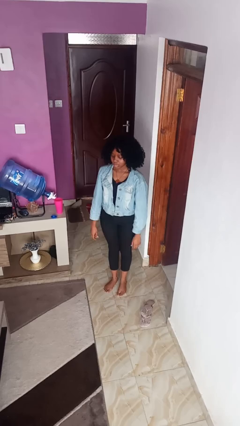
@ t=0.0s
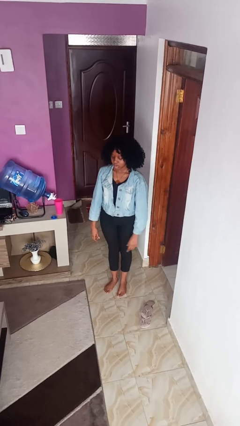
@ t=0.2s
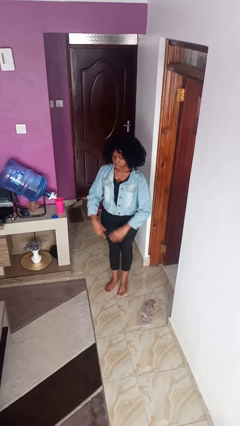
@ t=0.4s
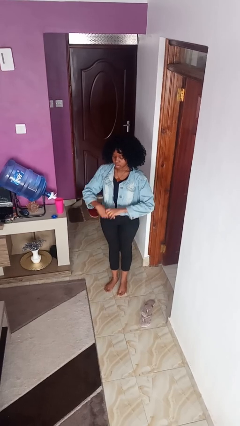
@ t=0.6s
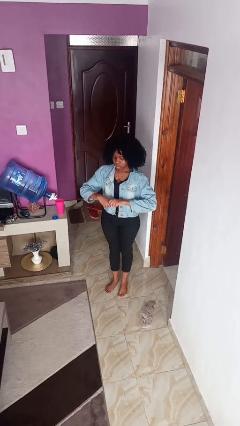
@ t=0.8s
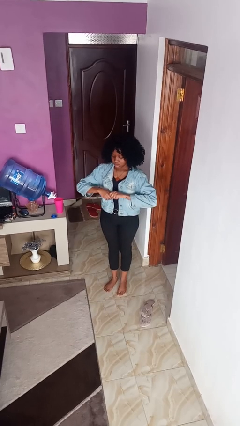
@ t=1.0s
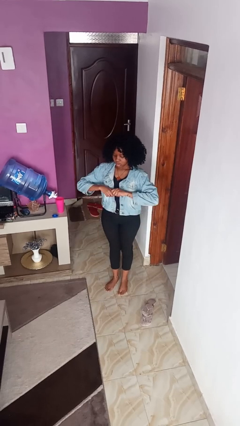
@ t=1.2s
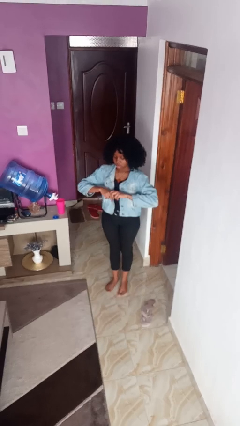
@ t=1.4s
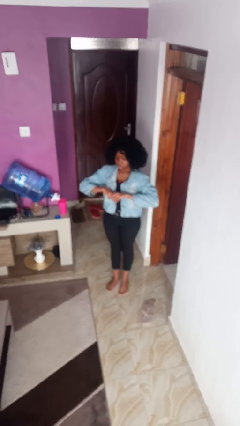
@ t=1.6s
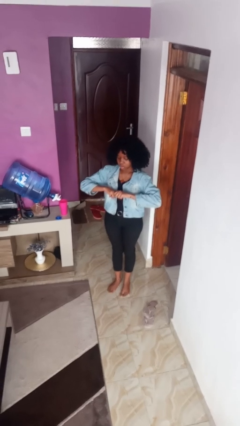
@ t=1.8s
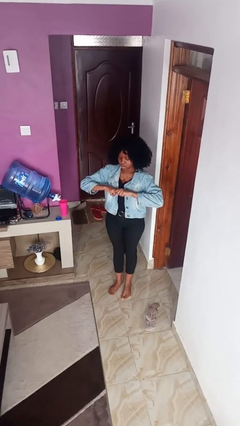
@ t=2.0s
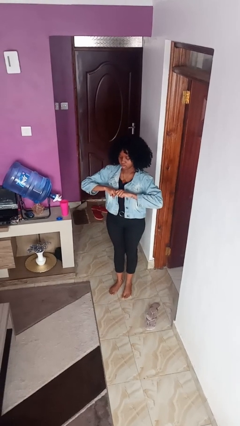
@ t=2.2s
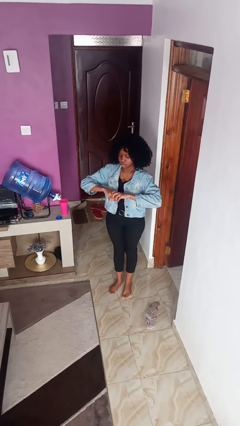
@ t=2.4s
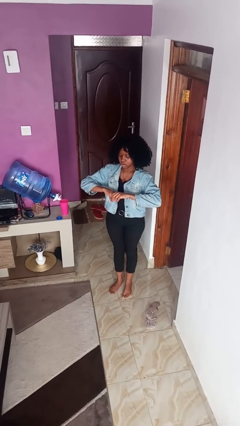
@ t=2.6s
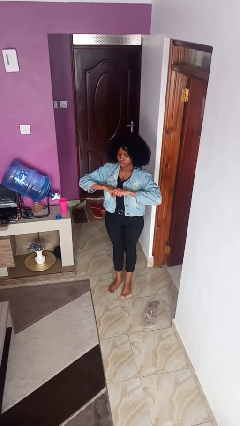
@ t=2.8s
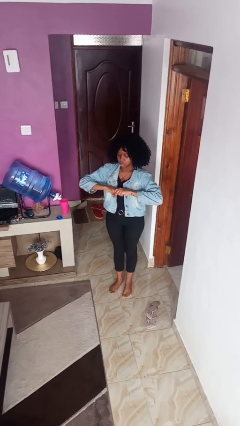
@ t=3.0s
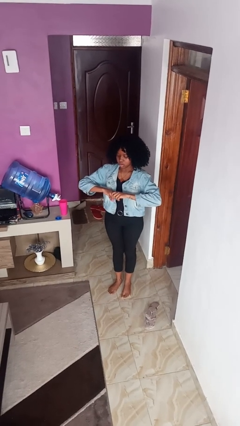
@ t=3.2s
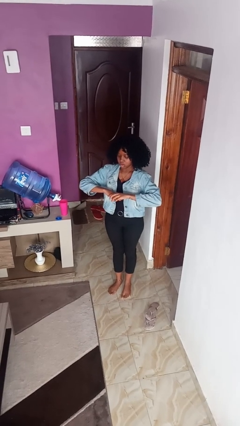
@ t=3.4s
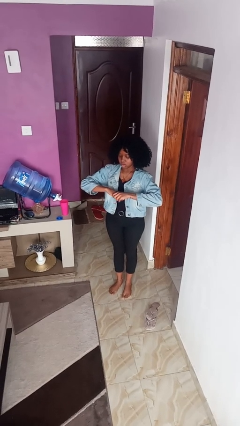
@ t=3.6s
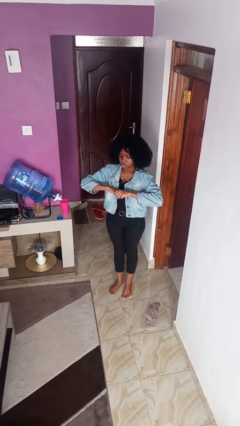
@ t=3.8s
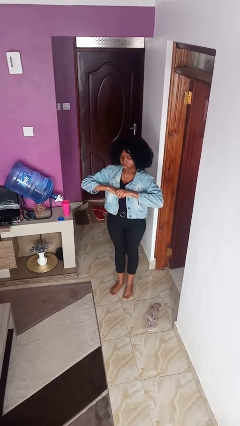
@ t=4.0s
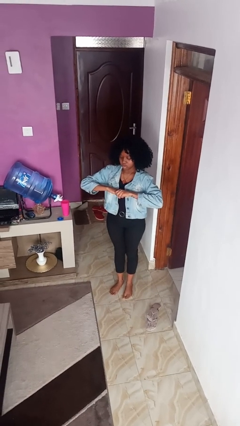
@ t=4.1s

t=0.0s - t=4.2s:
person cracks knuckles

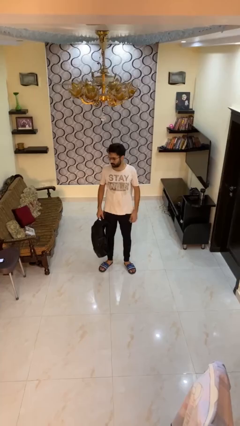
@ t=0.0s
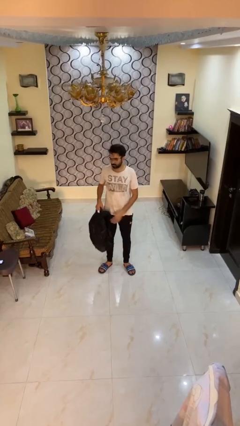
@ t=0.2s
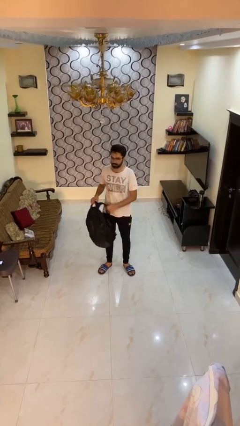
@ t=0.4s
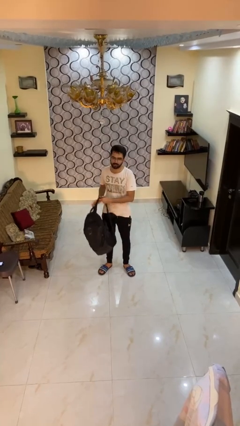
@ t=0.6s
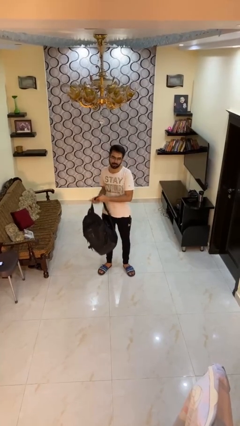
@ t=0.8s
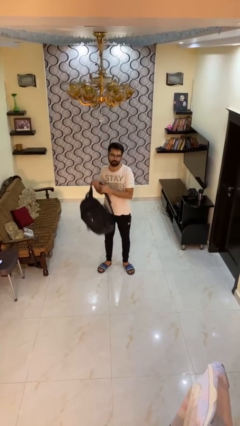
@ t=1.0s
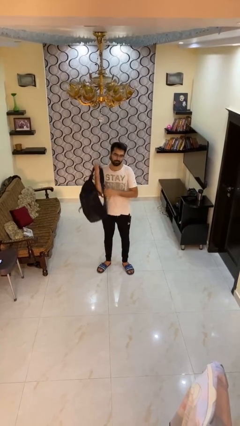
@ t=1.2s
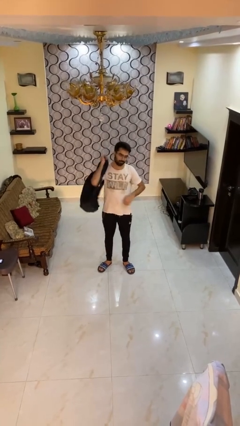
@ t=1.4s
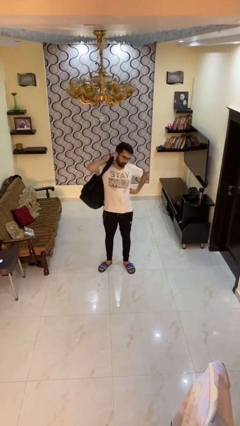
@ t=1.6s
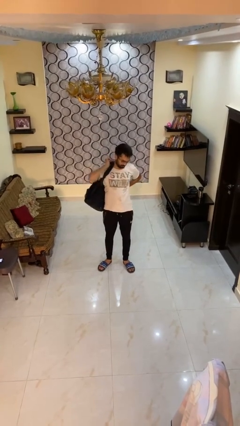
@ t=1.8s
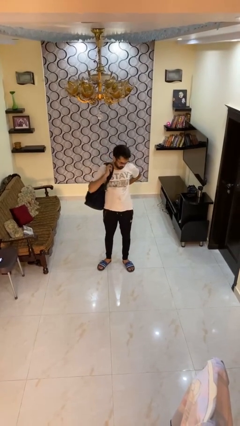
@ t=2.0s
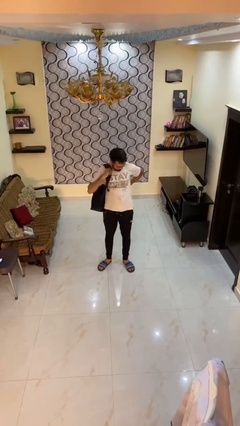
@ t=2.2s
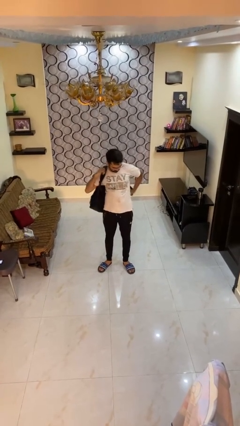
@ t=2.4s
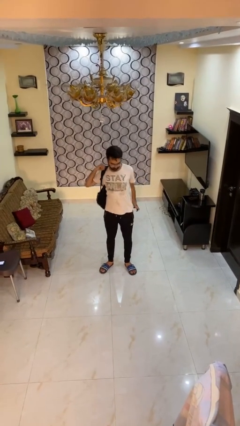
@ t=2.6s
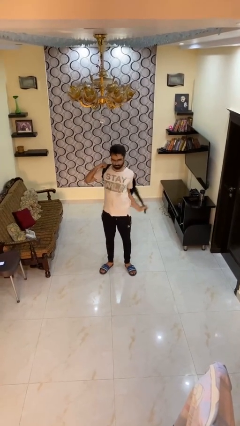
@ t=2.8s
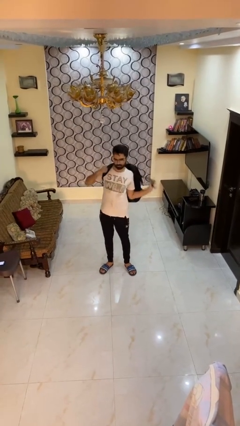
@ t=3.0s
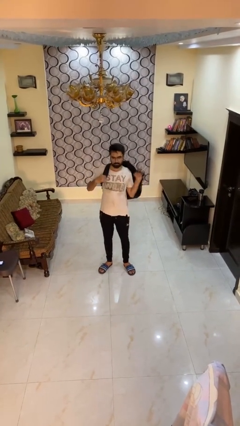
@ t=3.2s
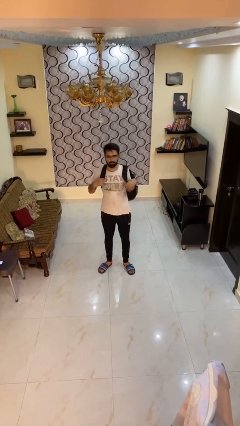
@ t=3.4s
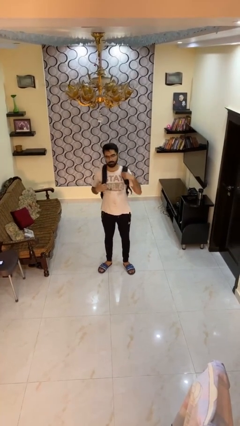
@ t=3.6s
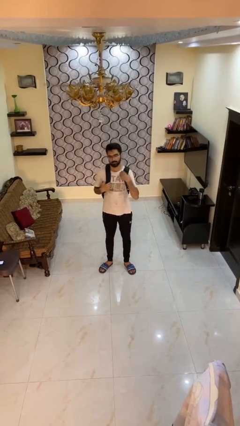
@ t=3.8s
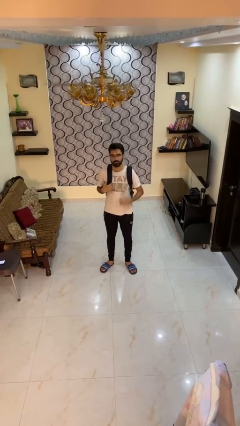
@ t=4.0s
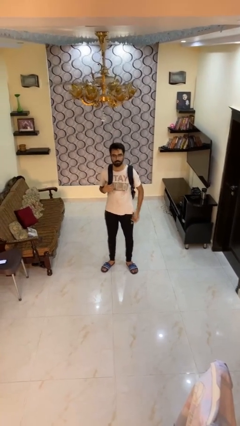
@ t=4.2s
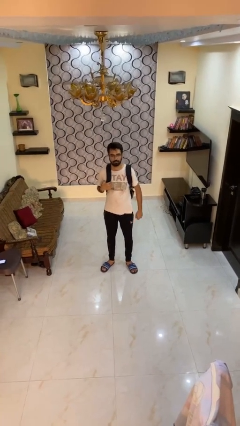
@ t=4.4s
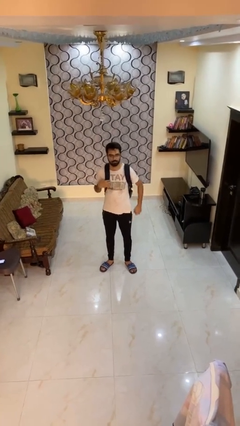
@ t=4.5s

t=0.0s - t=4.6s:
person puts on backpack

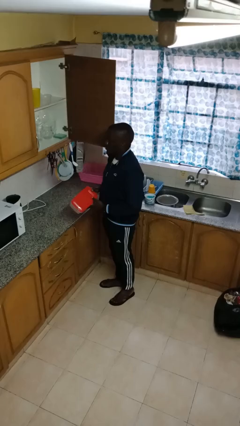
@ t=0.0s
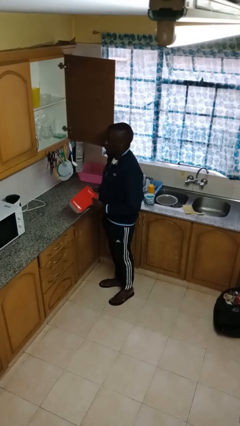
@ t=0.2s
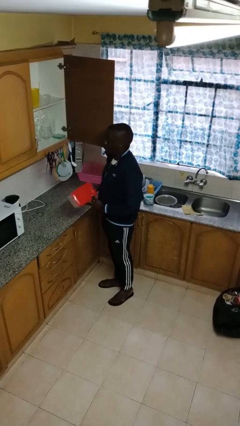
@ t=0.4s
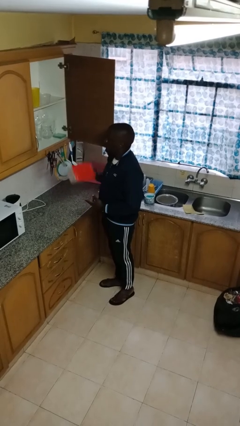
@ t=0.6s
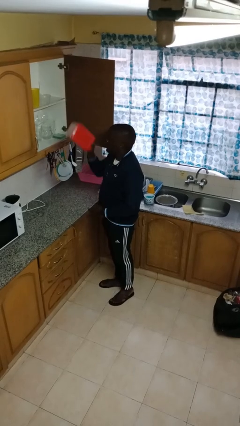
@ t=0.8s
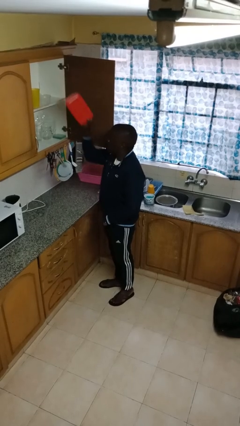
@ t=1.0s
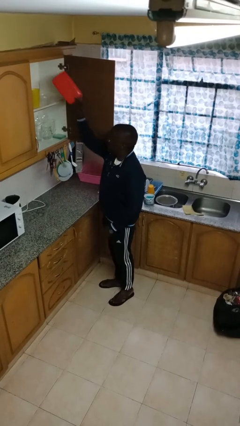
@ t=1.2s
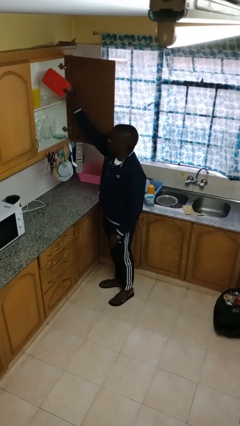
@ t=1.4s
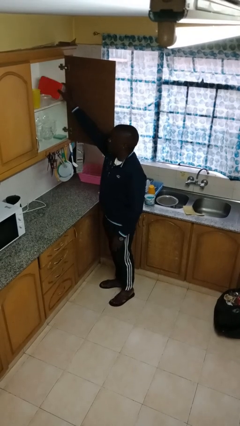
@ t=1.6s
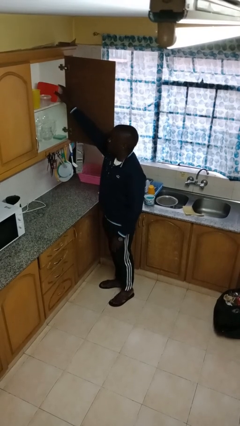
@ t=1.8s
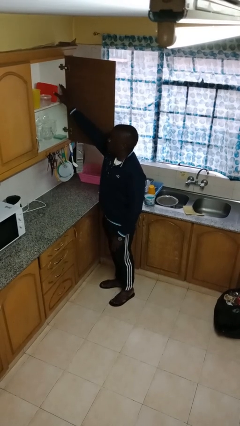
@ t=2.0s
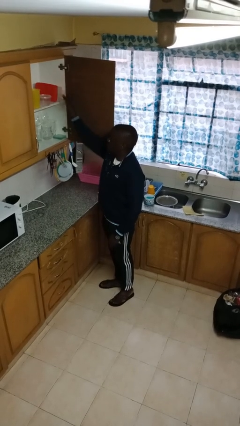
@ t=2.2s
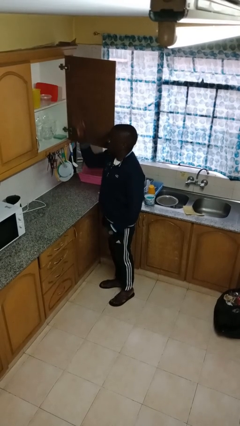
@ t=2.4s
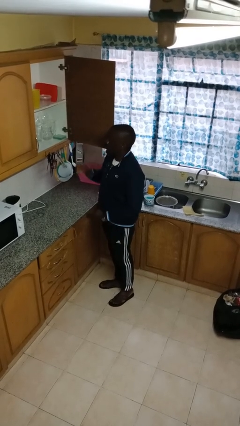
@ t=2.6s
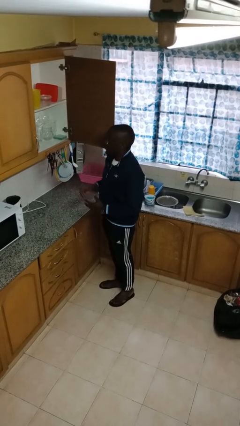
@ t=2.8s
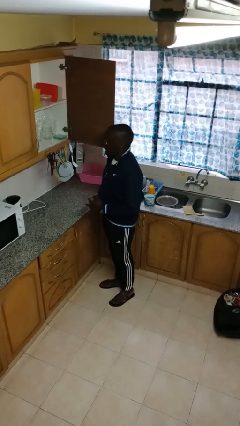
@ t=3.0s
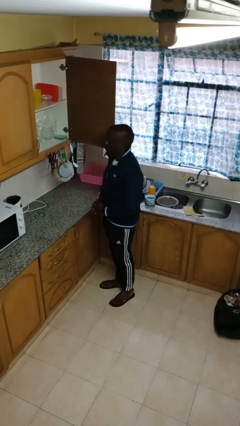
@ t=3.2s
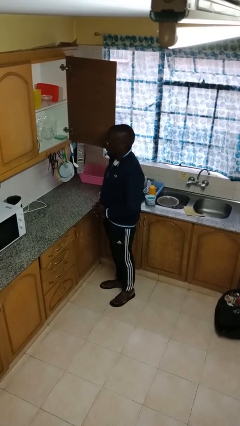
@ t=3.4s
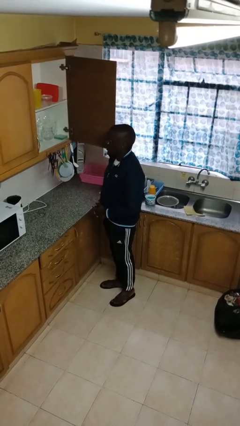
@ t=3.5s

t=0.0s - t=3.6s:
person puts down object on shelf

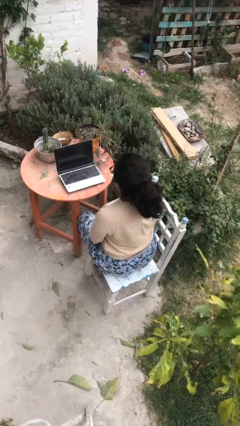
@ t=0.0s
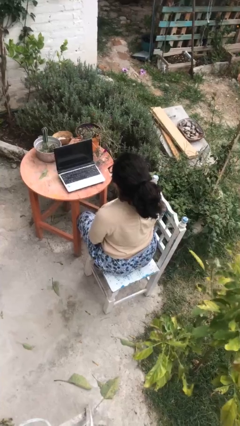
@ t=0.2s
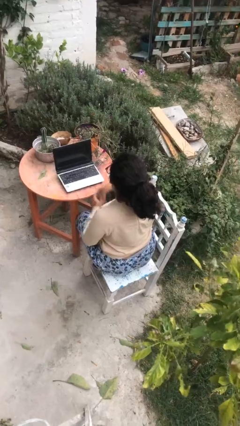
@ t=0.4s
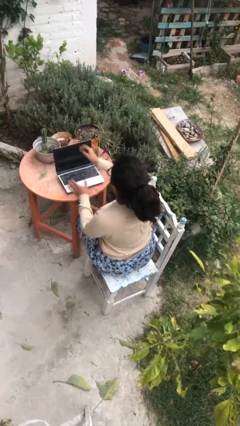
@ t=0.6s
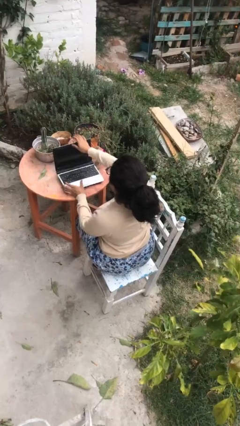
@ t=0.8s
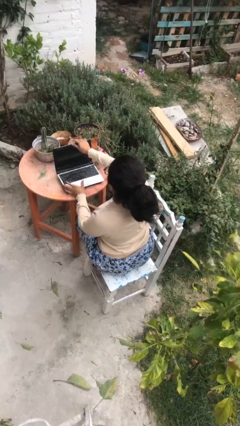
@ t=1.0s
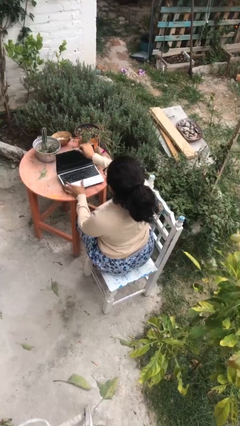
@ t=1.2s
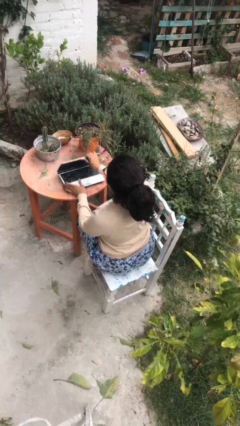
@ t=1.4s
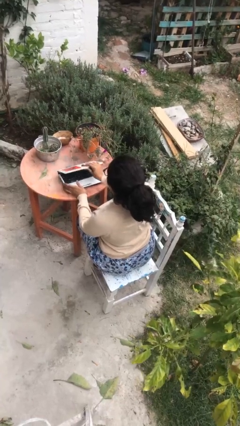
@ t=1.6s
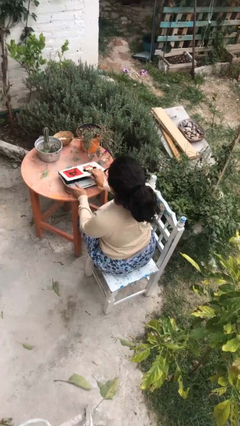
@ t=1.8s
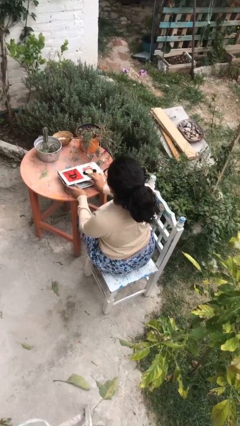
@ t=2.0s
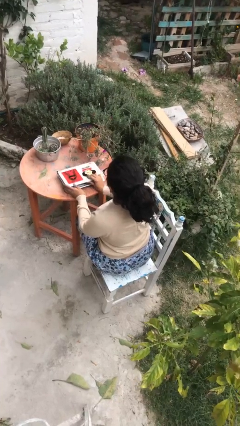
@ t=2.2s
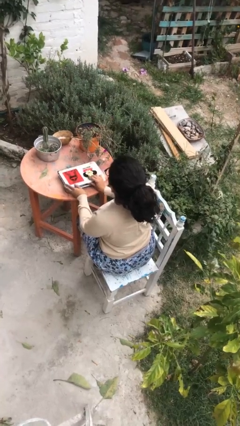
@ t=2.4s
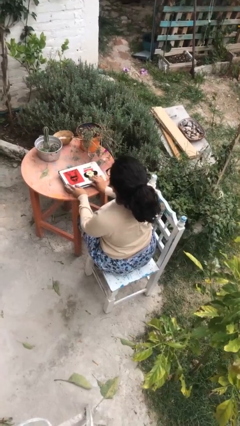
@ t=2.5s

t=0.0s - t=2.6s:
person closes laptop

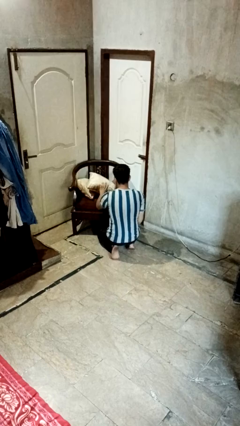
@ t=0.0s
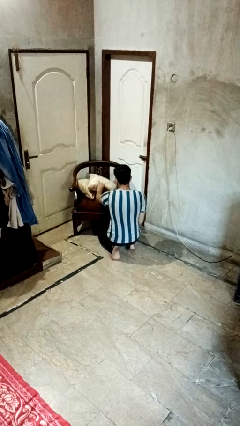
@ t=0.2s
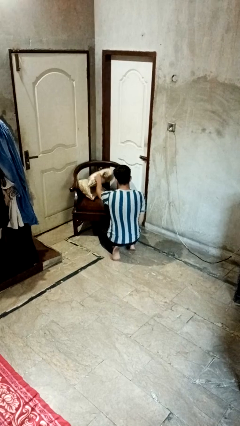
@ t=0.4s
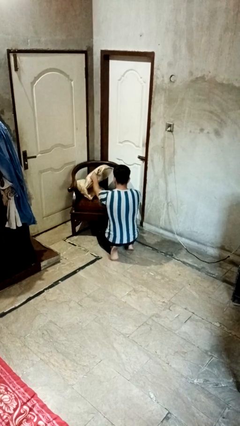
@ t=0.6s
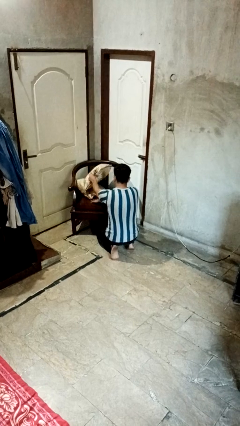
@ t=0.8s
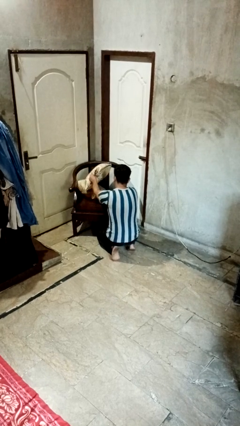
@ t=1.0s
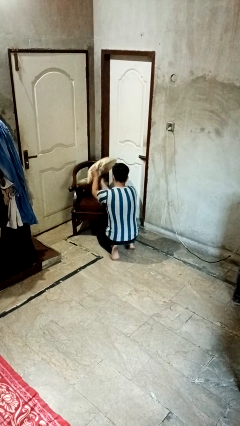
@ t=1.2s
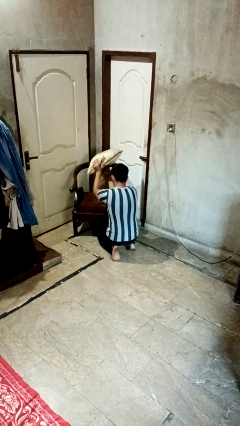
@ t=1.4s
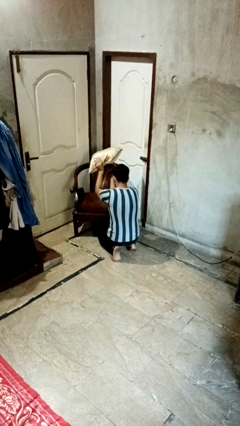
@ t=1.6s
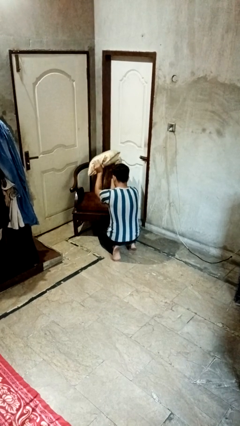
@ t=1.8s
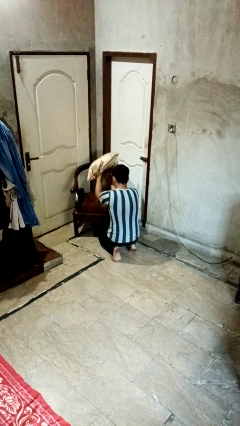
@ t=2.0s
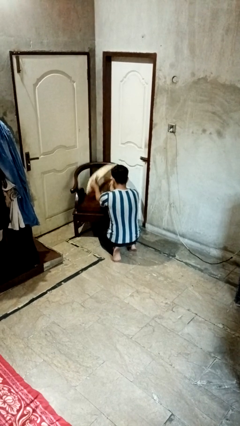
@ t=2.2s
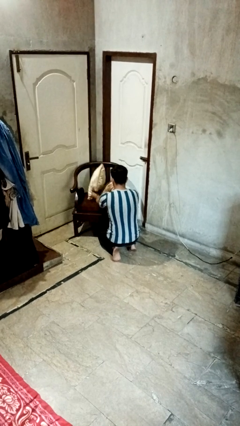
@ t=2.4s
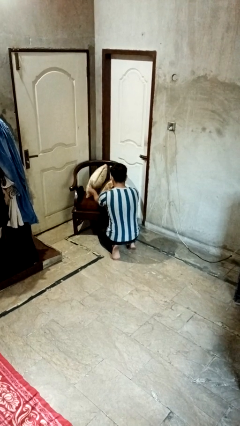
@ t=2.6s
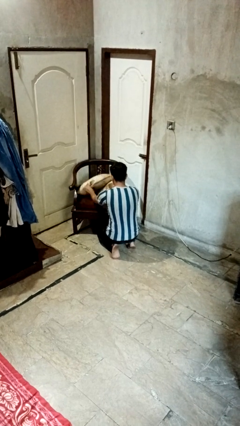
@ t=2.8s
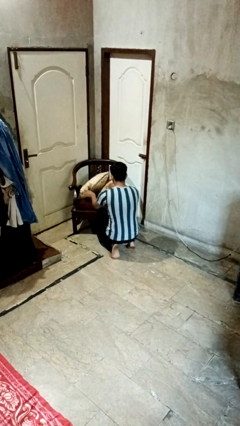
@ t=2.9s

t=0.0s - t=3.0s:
person searches in couch
